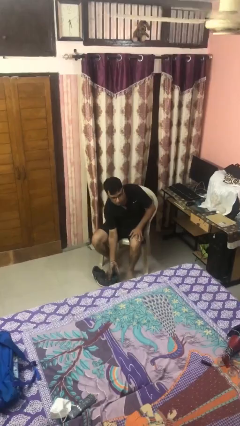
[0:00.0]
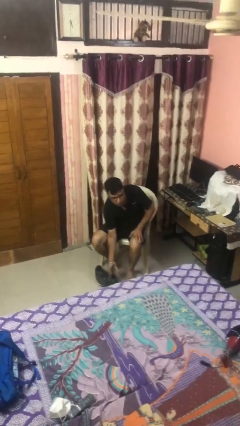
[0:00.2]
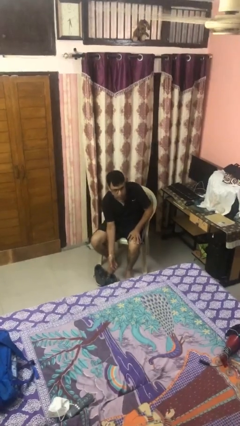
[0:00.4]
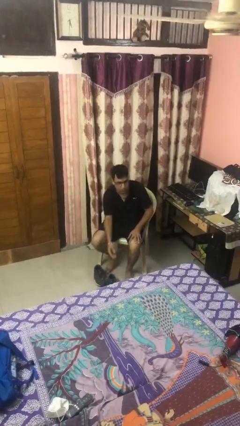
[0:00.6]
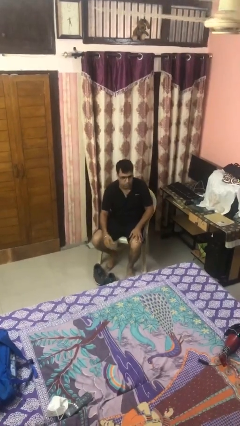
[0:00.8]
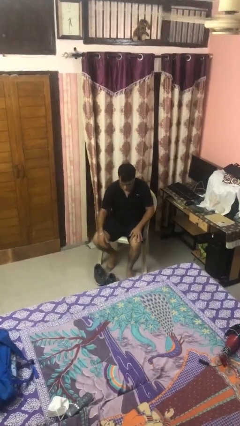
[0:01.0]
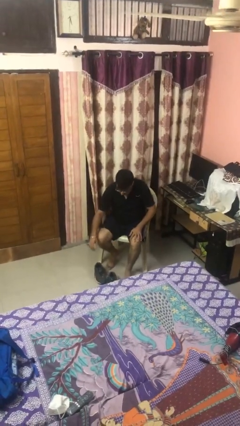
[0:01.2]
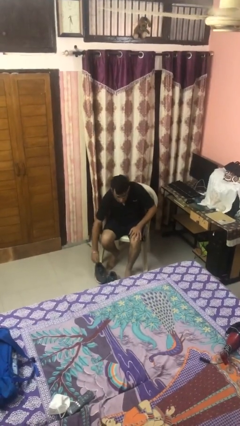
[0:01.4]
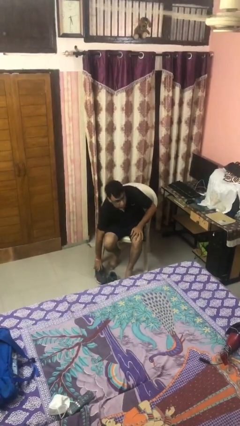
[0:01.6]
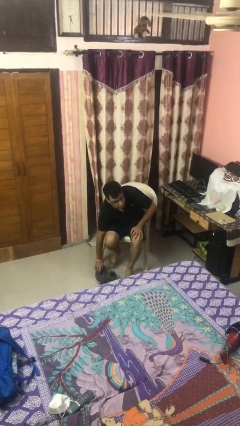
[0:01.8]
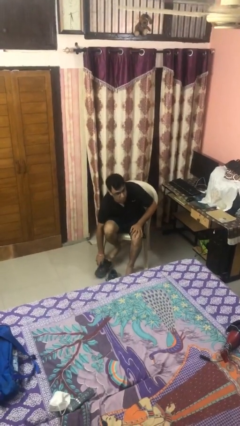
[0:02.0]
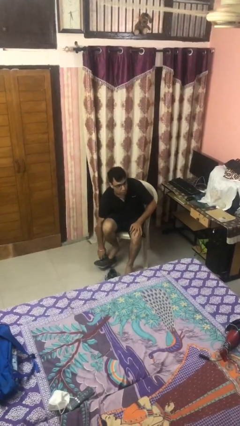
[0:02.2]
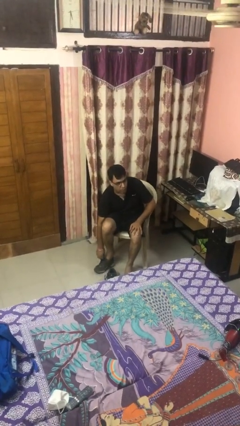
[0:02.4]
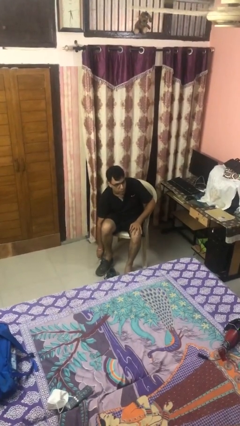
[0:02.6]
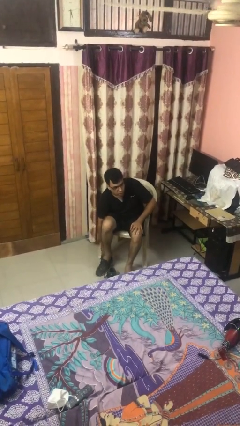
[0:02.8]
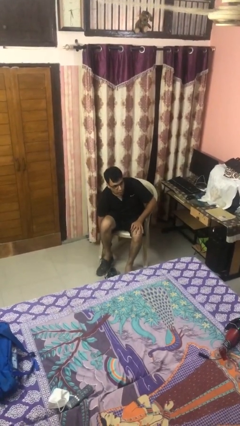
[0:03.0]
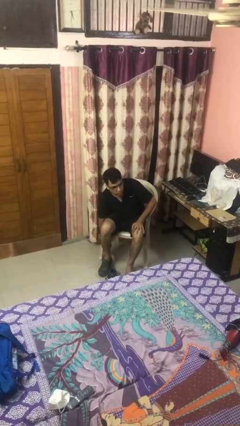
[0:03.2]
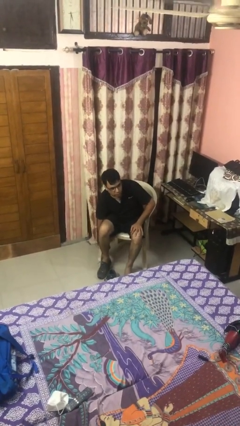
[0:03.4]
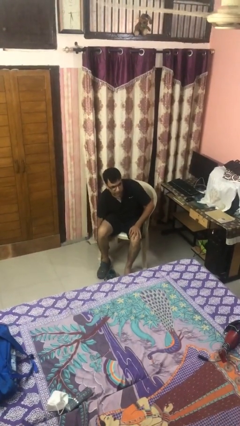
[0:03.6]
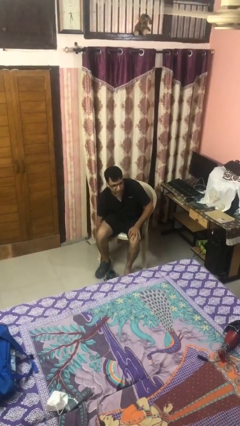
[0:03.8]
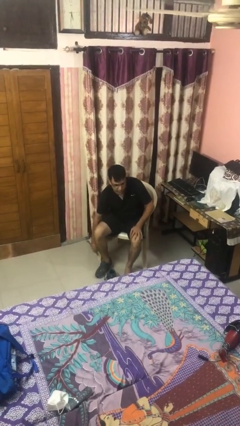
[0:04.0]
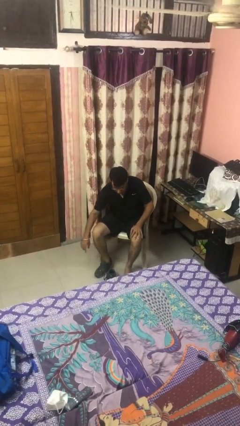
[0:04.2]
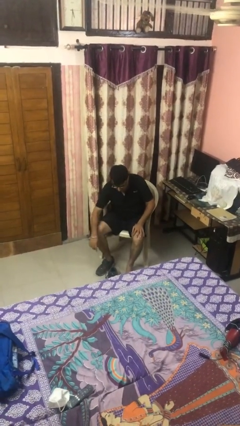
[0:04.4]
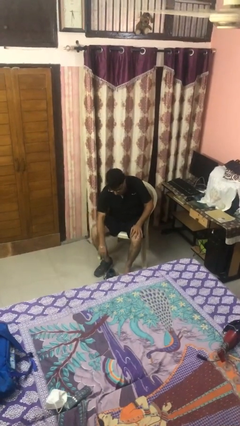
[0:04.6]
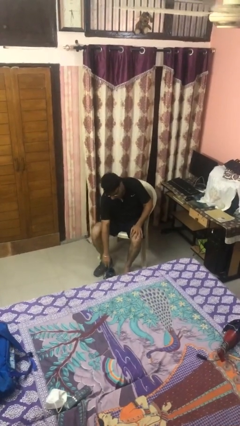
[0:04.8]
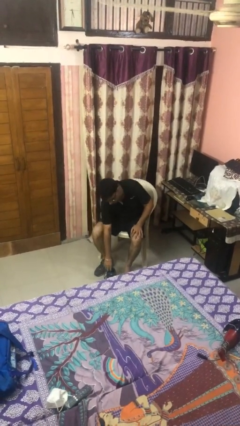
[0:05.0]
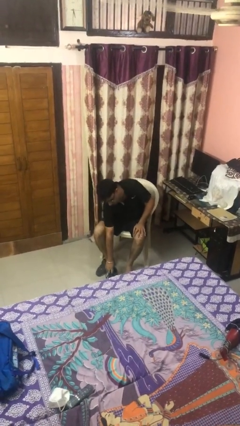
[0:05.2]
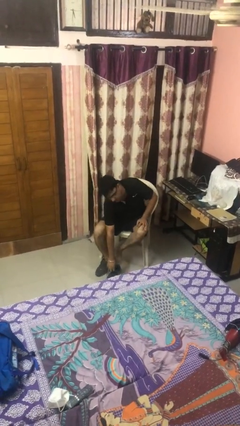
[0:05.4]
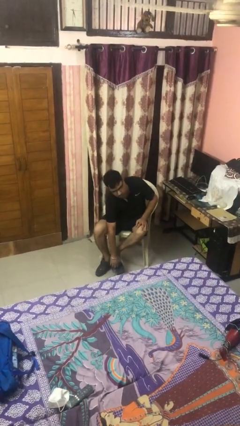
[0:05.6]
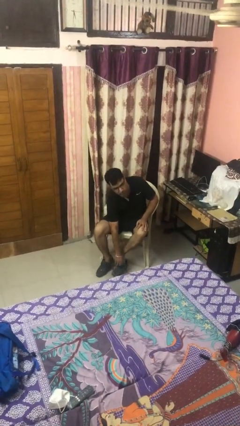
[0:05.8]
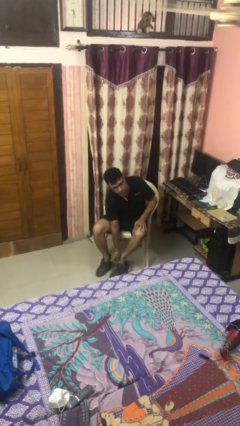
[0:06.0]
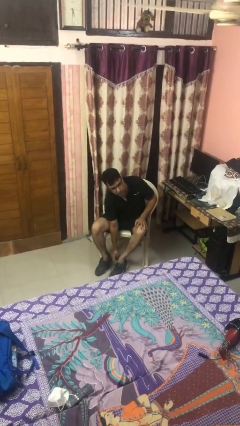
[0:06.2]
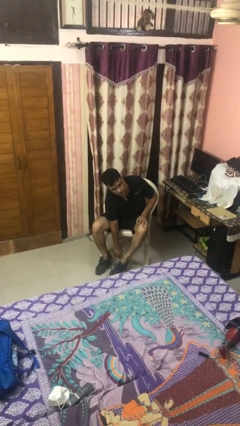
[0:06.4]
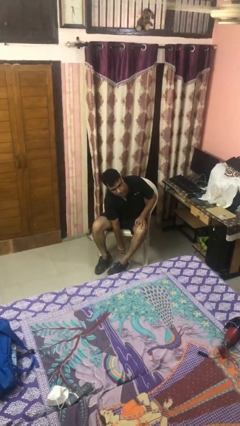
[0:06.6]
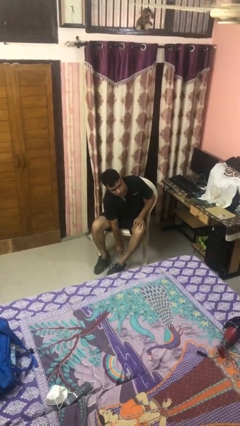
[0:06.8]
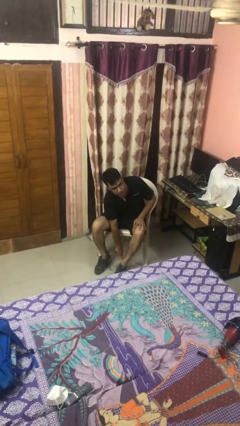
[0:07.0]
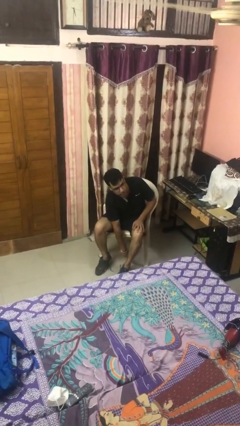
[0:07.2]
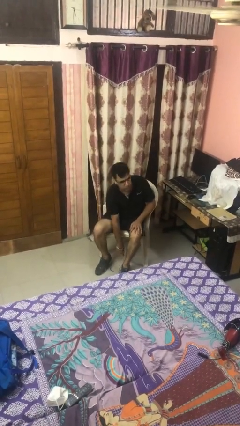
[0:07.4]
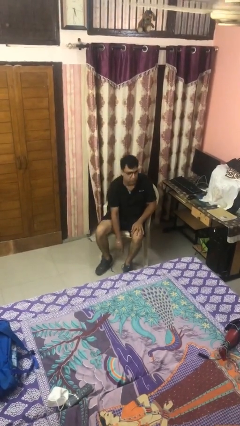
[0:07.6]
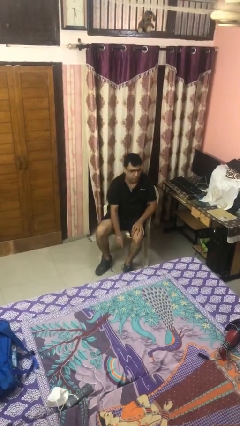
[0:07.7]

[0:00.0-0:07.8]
person puts on shoes

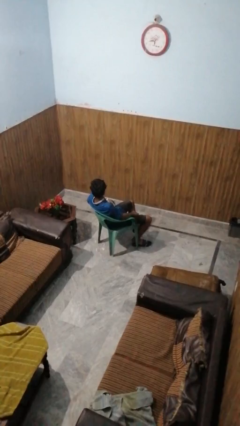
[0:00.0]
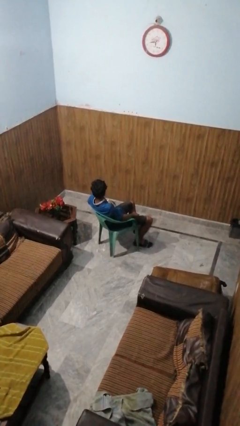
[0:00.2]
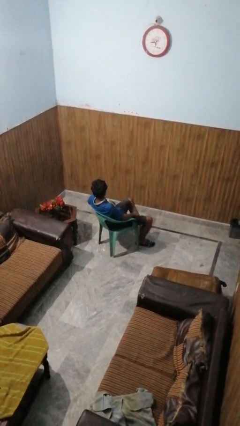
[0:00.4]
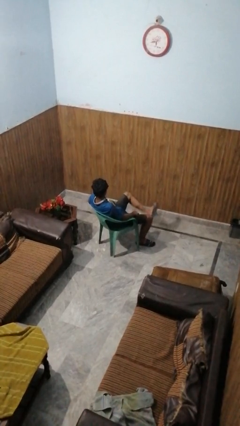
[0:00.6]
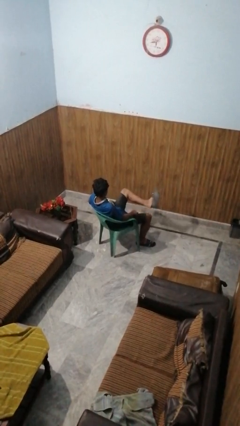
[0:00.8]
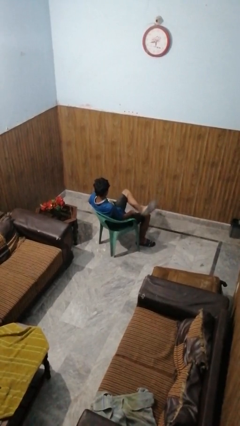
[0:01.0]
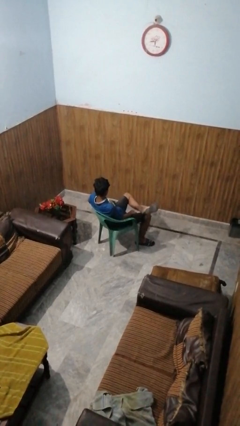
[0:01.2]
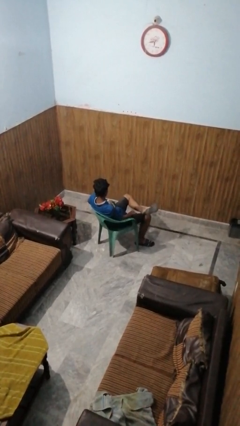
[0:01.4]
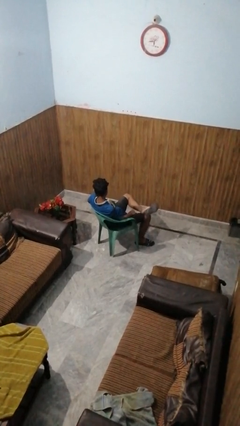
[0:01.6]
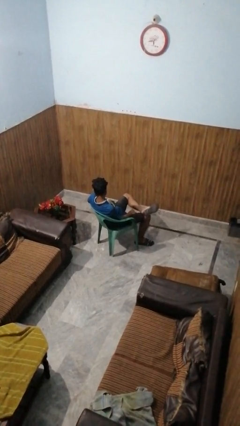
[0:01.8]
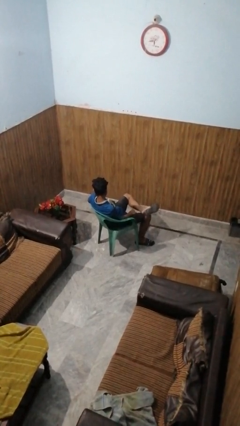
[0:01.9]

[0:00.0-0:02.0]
person crosses legs

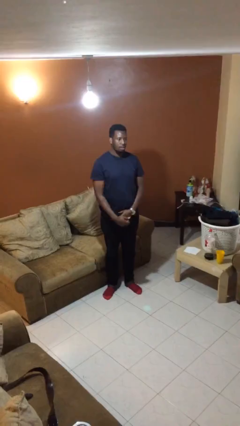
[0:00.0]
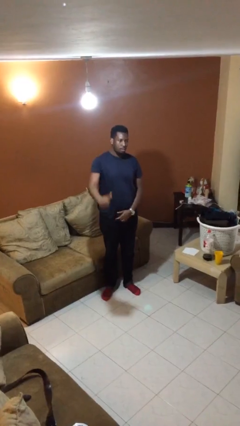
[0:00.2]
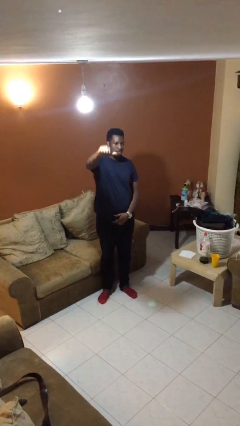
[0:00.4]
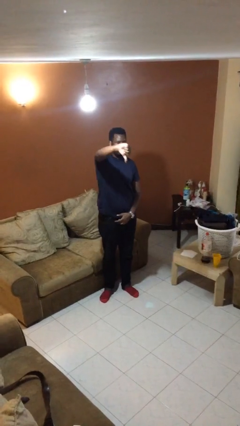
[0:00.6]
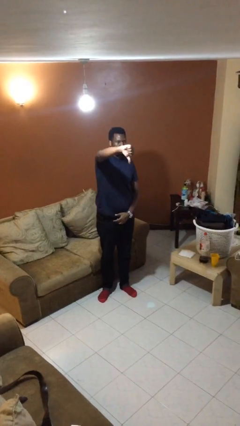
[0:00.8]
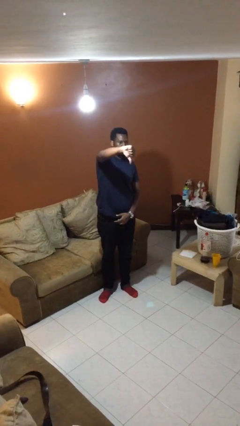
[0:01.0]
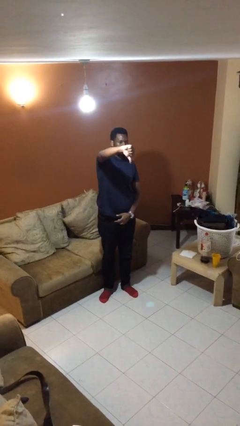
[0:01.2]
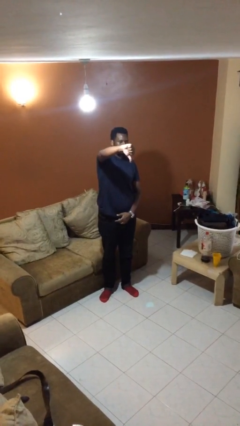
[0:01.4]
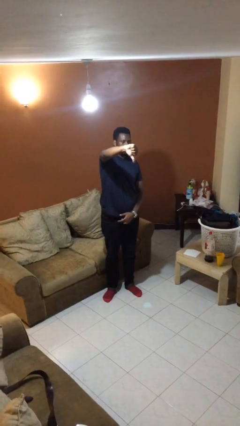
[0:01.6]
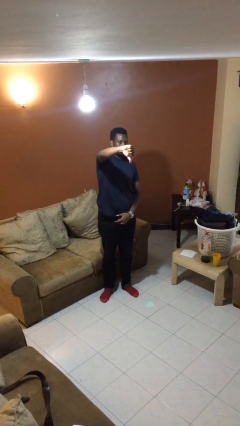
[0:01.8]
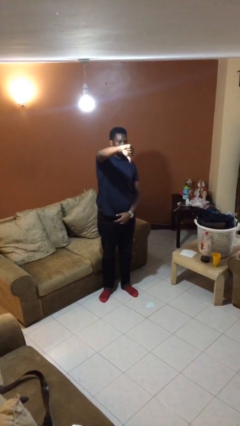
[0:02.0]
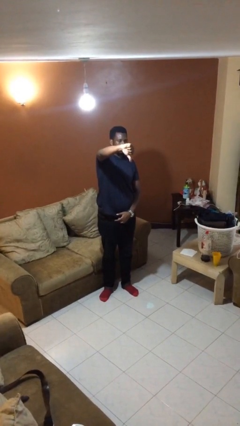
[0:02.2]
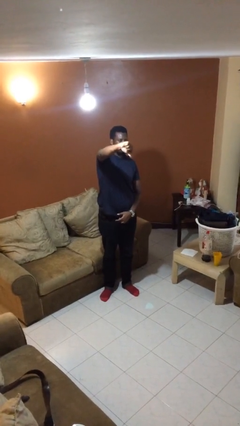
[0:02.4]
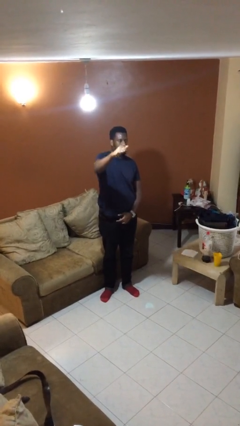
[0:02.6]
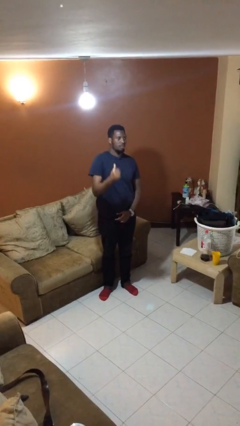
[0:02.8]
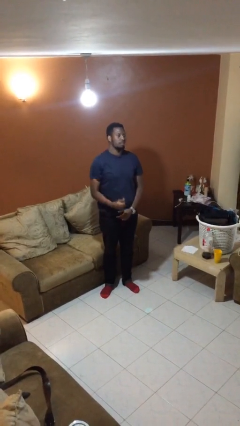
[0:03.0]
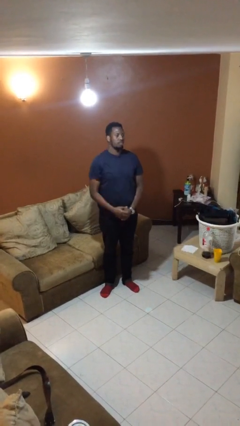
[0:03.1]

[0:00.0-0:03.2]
person gestures thumbs down

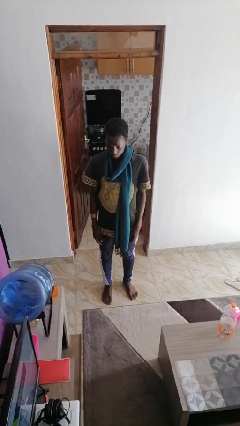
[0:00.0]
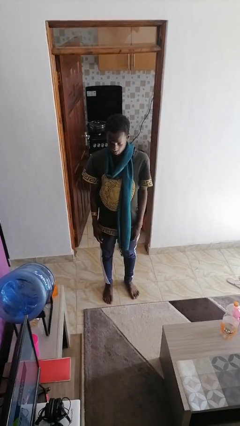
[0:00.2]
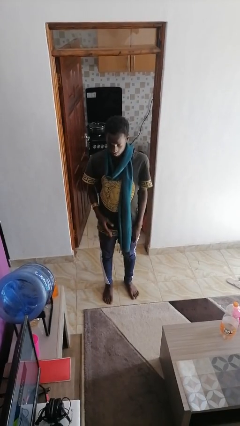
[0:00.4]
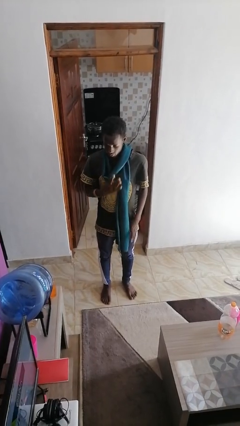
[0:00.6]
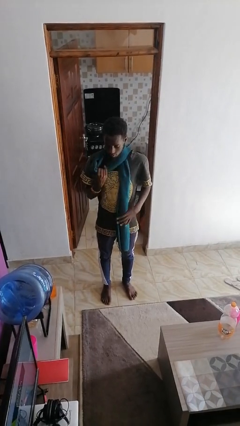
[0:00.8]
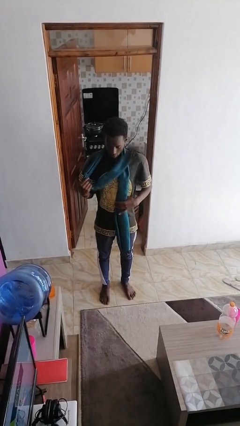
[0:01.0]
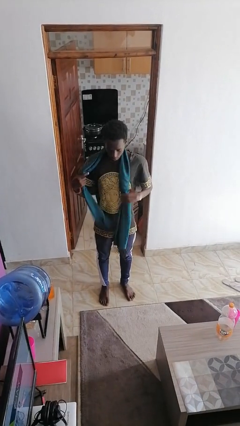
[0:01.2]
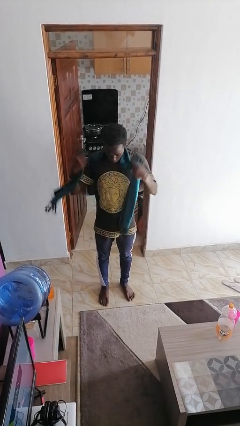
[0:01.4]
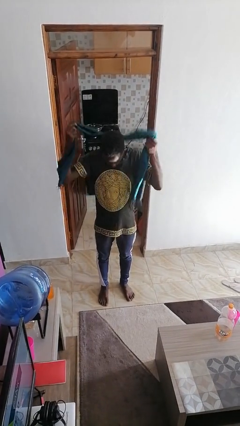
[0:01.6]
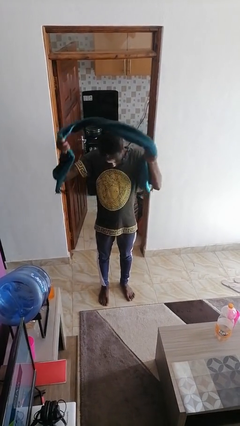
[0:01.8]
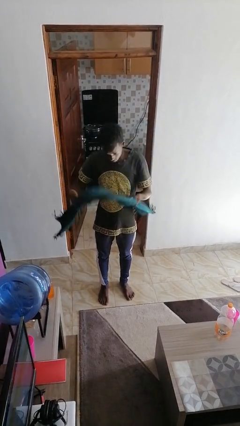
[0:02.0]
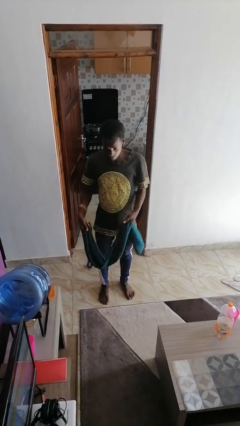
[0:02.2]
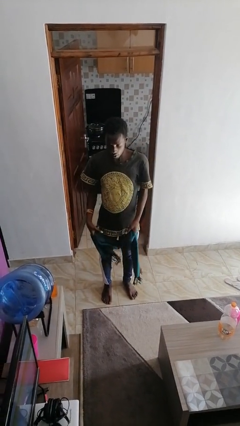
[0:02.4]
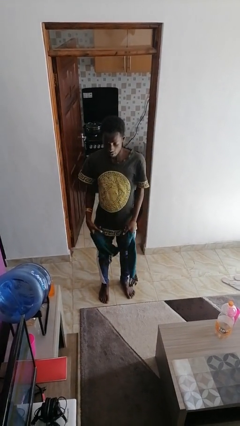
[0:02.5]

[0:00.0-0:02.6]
person takes off scarf

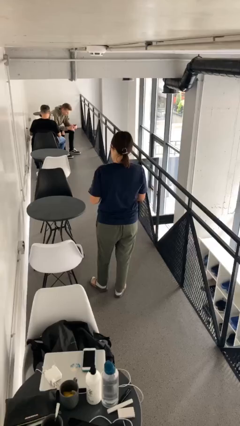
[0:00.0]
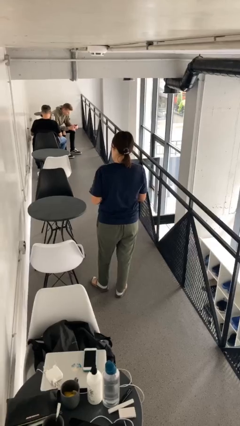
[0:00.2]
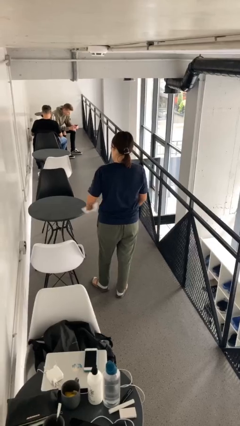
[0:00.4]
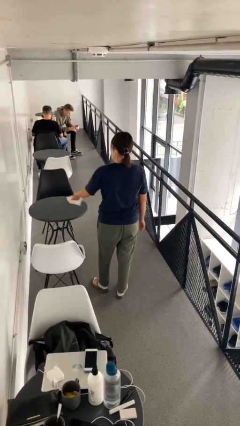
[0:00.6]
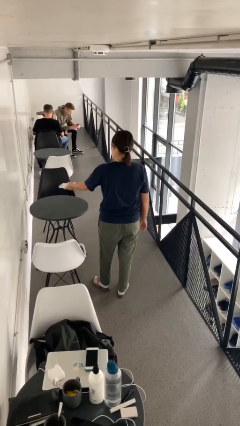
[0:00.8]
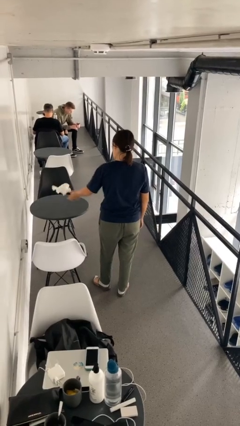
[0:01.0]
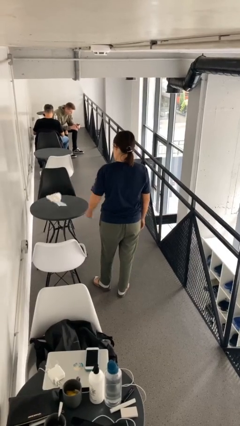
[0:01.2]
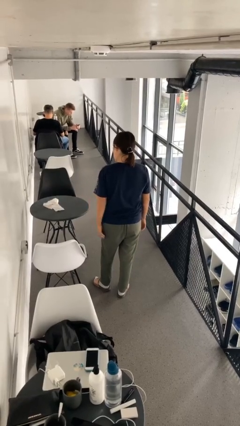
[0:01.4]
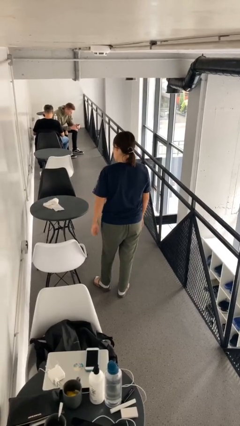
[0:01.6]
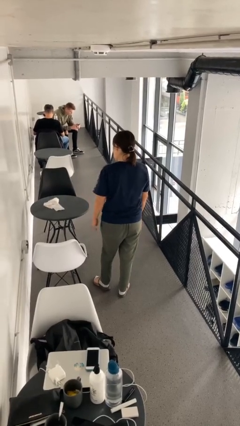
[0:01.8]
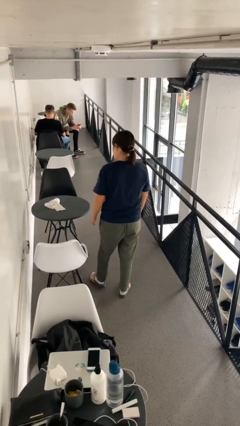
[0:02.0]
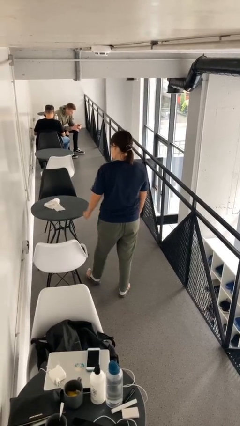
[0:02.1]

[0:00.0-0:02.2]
person throws object on table

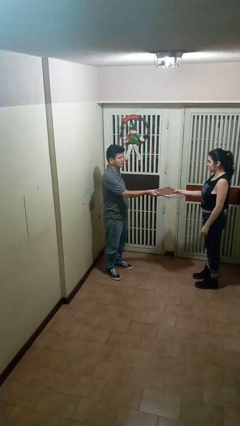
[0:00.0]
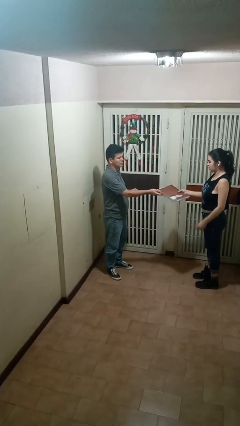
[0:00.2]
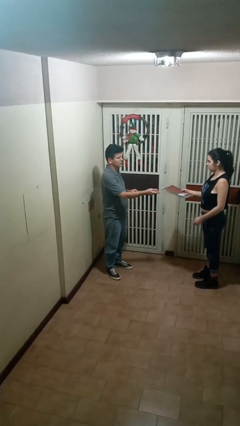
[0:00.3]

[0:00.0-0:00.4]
person transfers object to person
